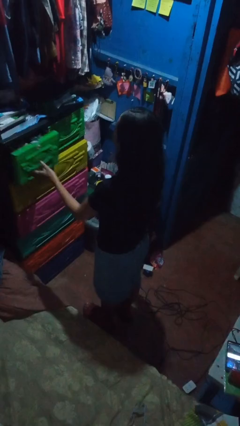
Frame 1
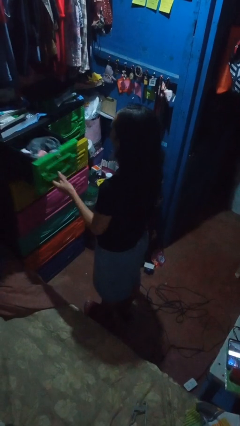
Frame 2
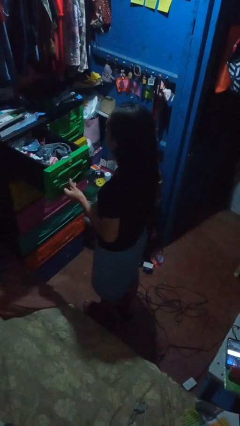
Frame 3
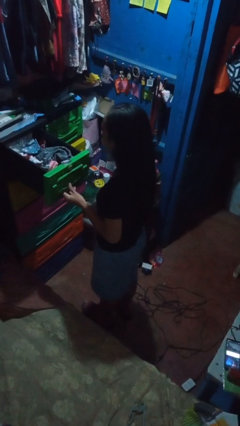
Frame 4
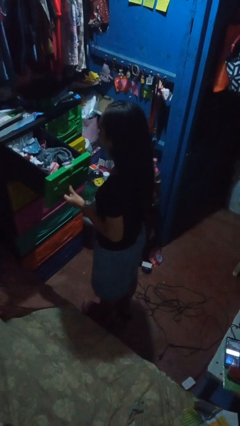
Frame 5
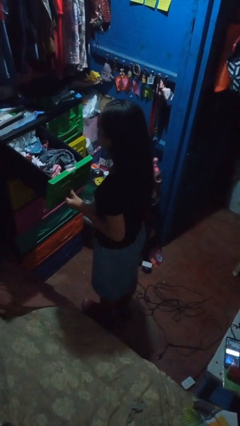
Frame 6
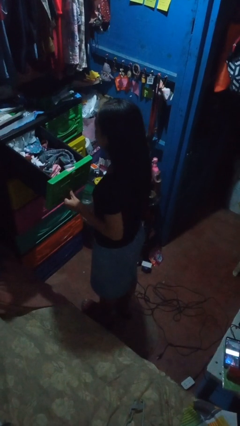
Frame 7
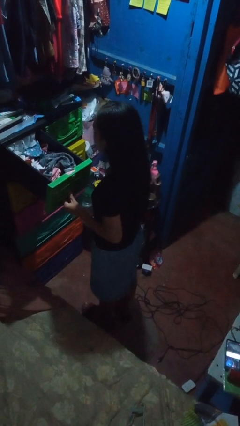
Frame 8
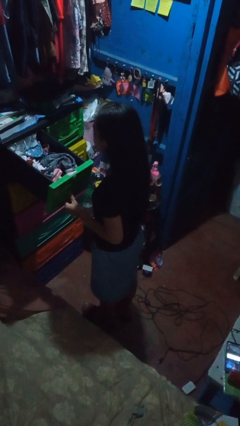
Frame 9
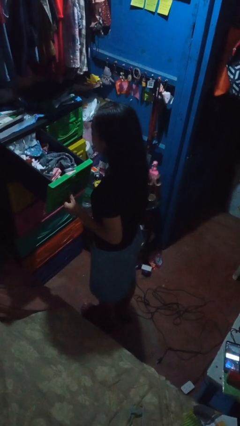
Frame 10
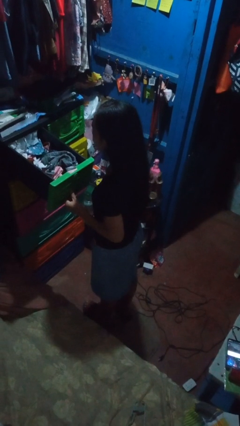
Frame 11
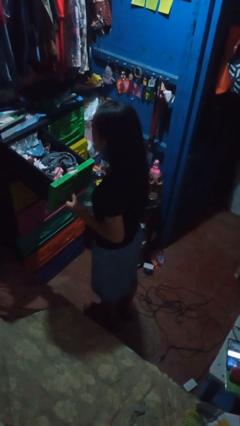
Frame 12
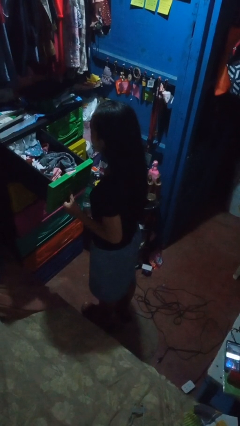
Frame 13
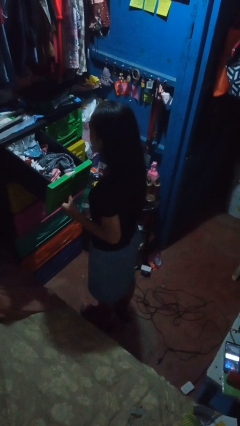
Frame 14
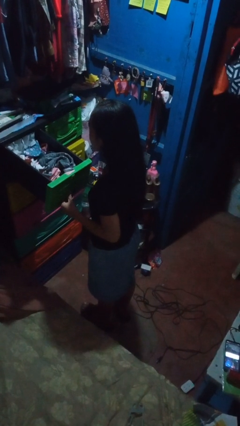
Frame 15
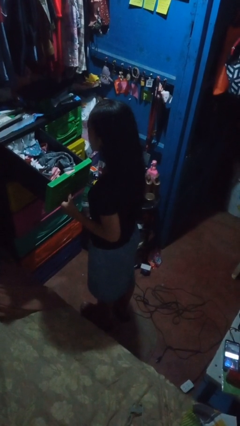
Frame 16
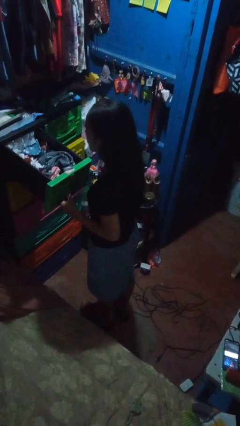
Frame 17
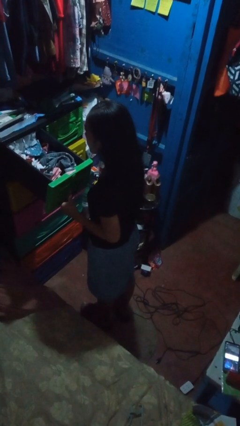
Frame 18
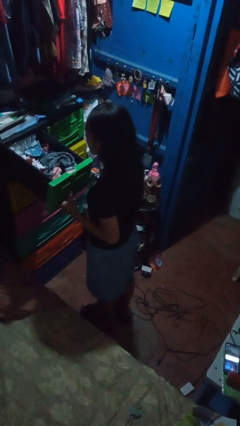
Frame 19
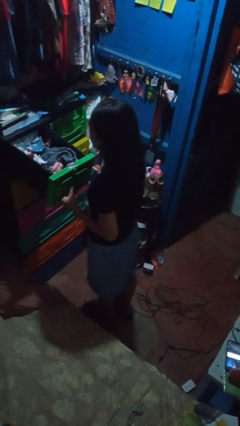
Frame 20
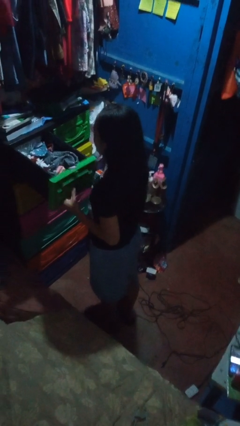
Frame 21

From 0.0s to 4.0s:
person opens dresser drawer

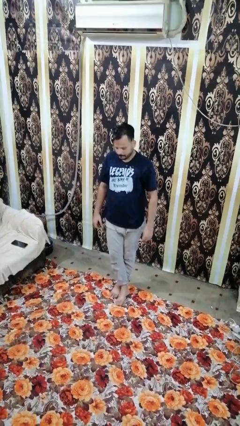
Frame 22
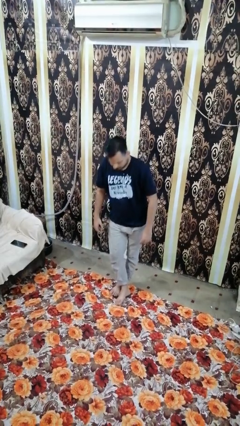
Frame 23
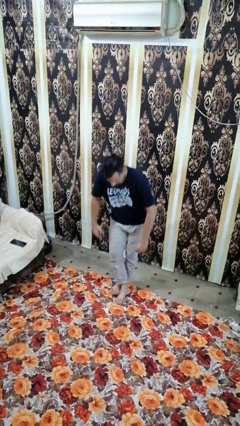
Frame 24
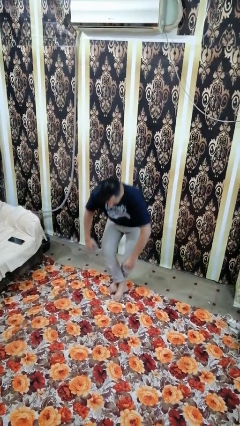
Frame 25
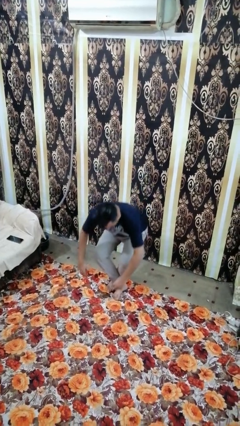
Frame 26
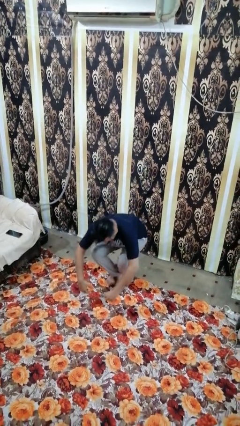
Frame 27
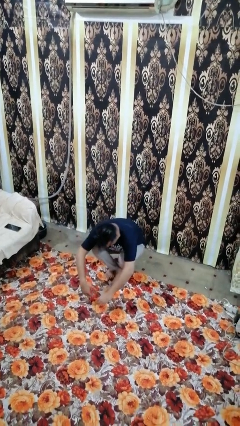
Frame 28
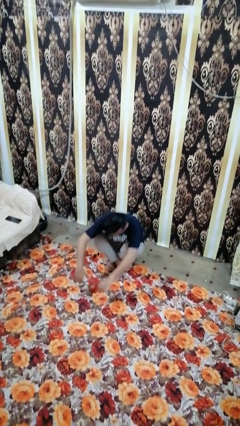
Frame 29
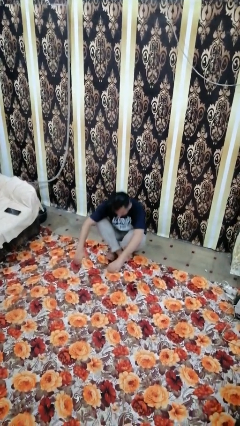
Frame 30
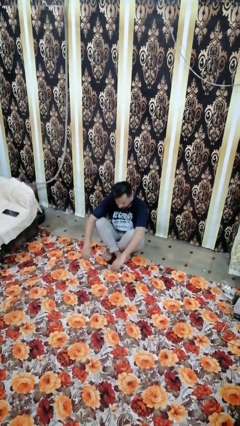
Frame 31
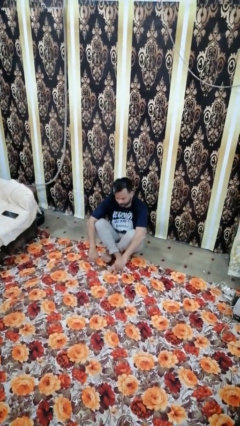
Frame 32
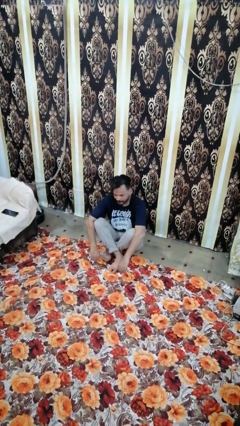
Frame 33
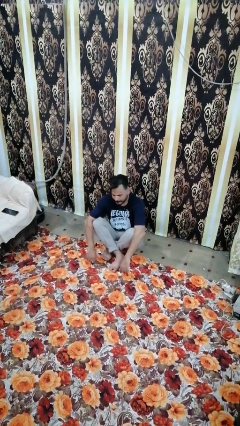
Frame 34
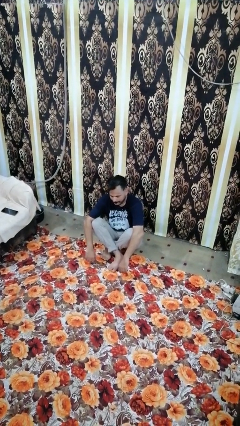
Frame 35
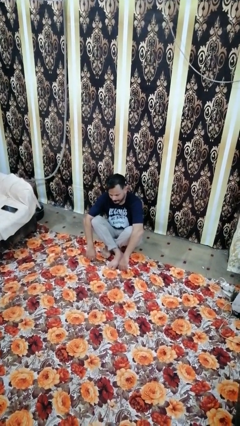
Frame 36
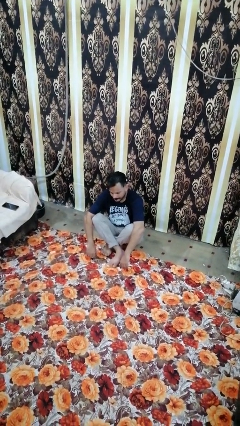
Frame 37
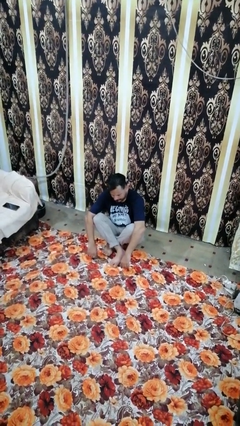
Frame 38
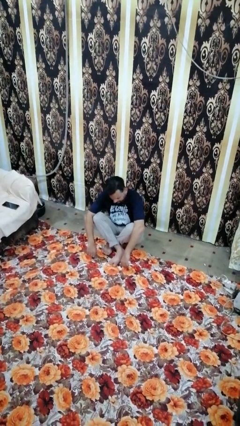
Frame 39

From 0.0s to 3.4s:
person sits crisscross

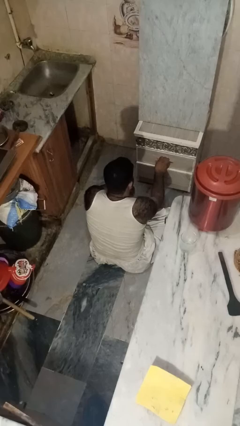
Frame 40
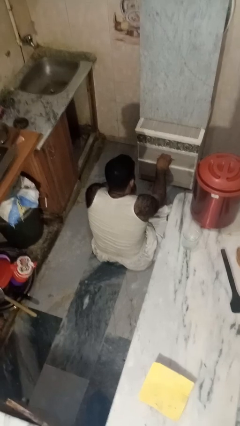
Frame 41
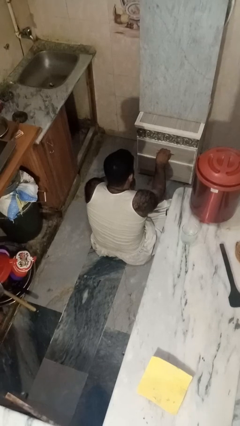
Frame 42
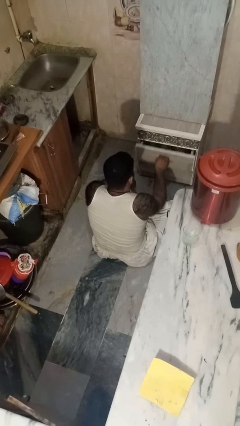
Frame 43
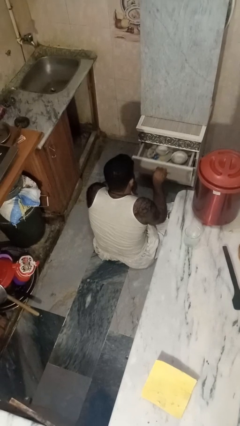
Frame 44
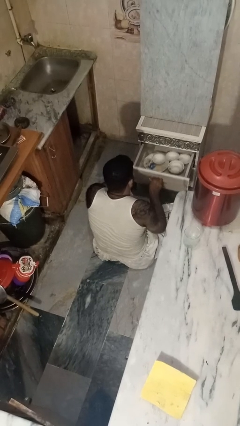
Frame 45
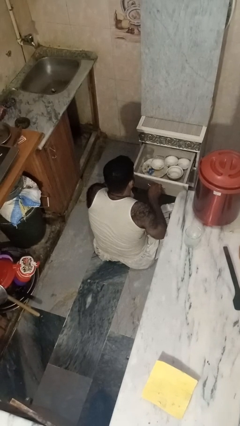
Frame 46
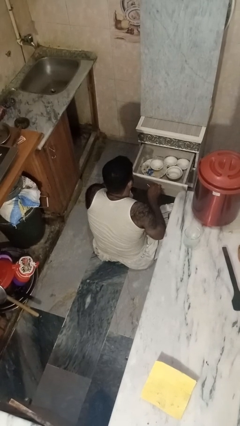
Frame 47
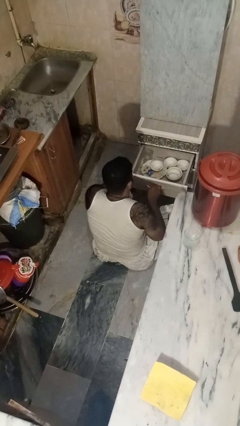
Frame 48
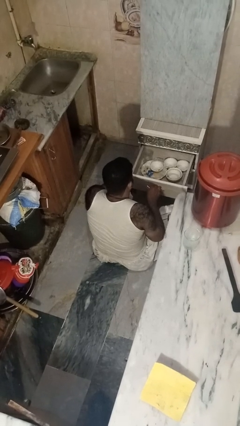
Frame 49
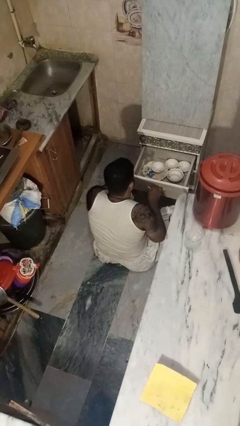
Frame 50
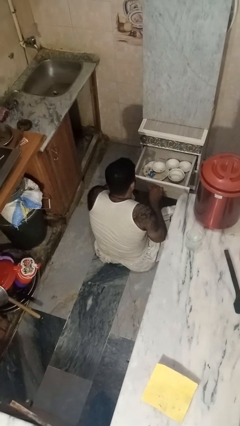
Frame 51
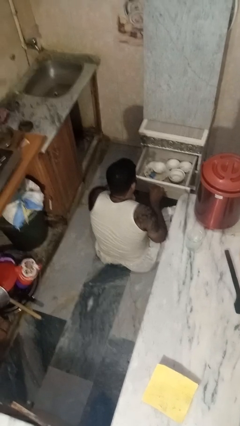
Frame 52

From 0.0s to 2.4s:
person opens kitchen drawer

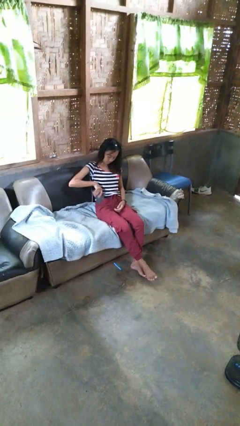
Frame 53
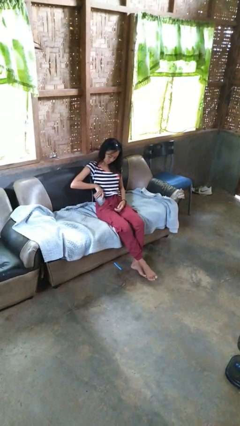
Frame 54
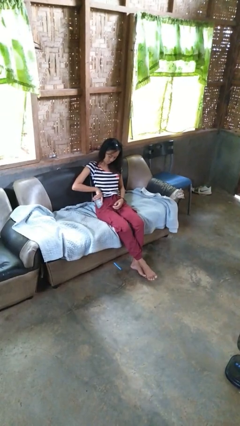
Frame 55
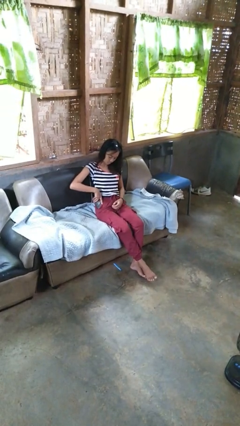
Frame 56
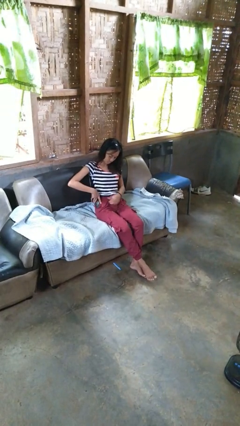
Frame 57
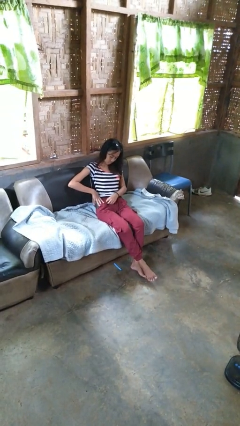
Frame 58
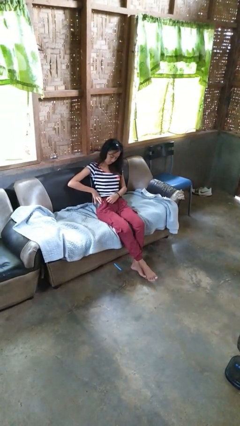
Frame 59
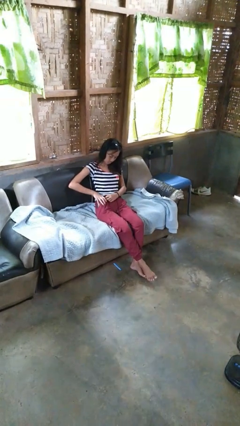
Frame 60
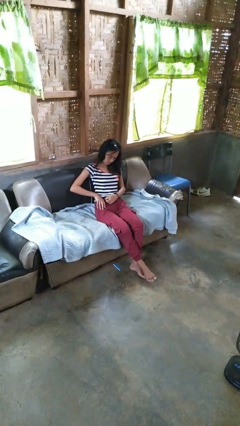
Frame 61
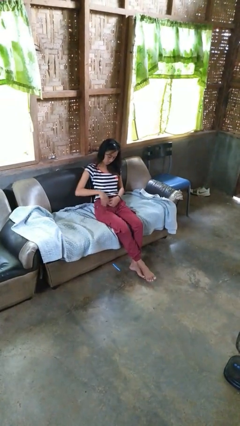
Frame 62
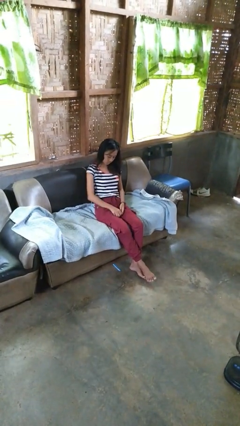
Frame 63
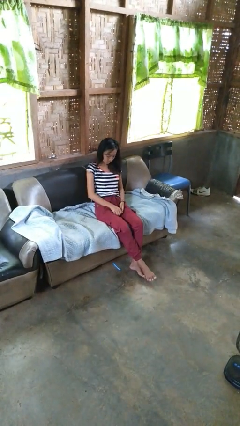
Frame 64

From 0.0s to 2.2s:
person puts phone into pocket

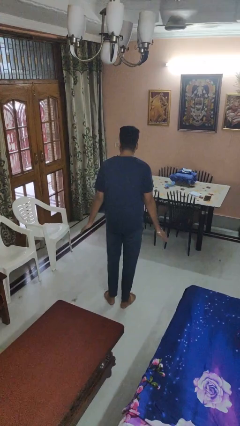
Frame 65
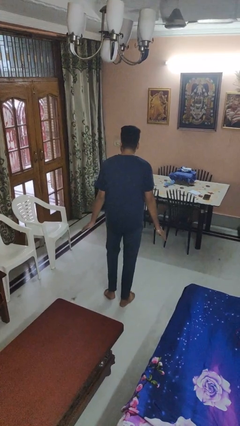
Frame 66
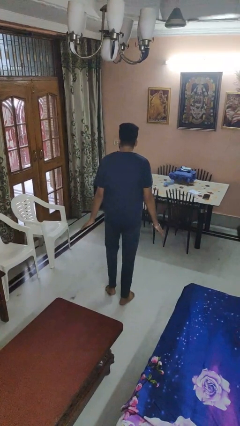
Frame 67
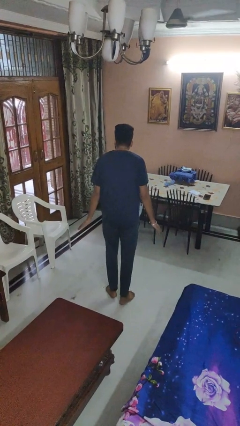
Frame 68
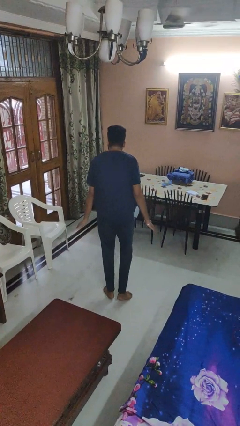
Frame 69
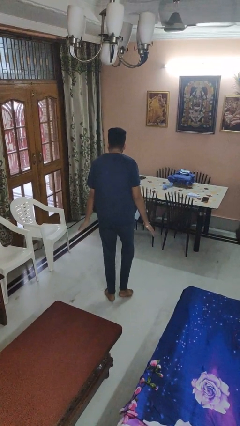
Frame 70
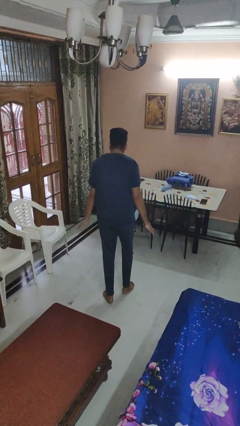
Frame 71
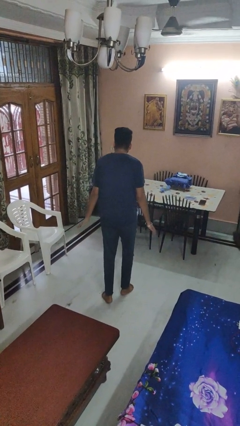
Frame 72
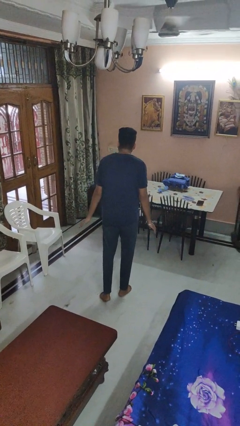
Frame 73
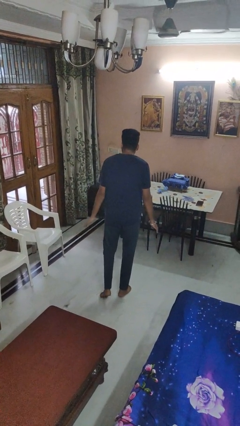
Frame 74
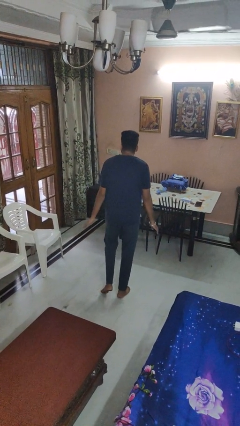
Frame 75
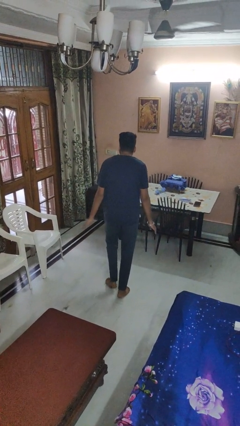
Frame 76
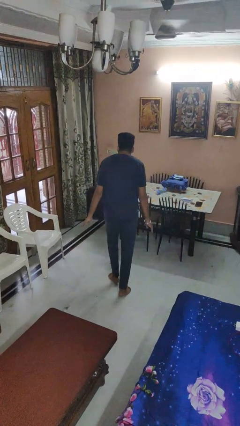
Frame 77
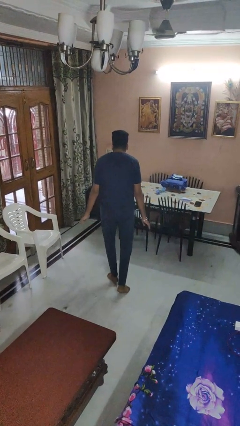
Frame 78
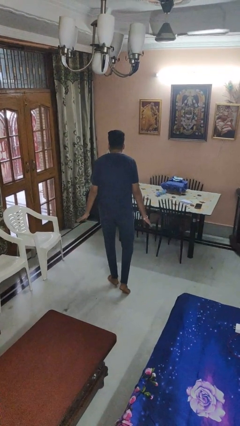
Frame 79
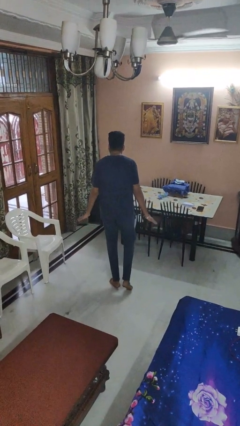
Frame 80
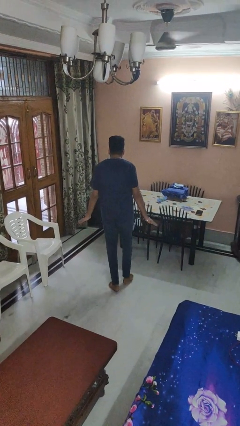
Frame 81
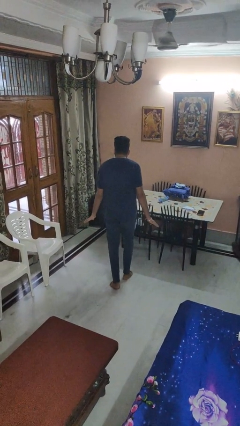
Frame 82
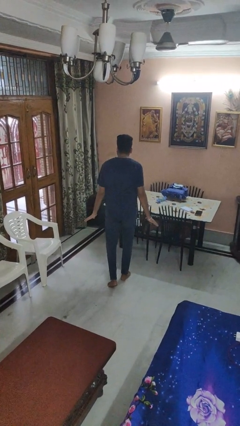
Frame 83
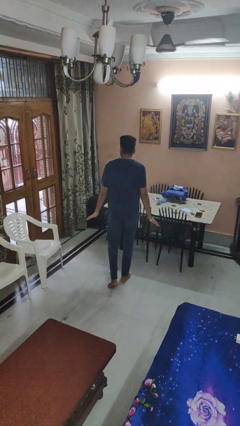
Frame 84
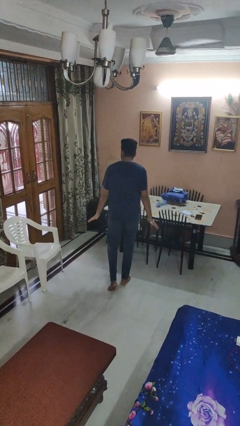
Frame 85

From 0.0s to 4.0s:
person walks tiptoe

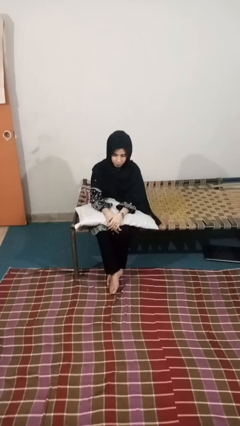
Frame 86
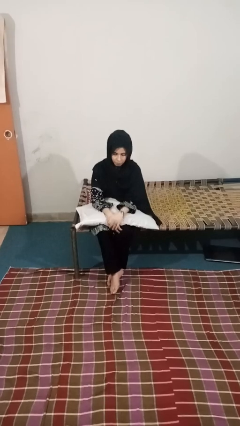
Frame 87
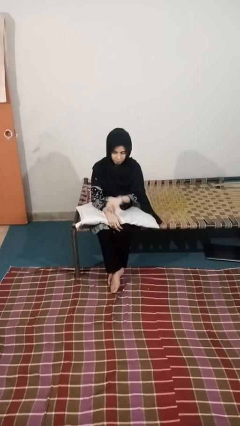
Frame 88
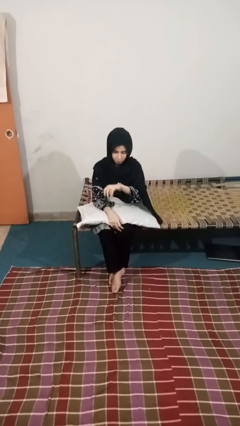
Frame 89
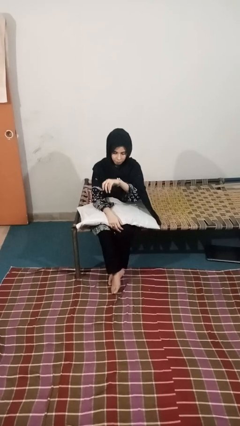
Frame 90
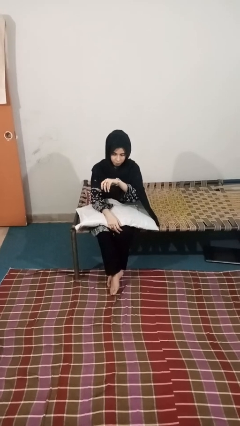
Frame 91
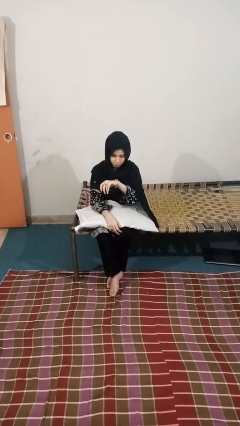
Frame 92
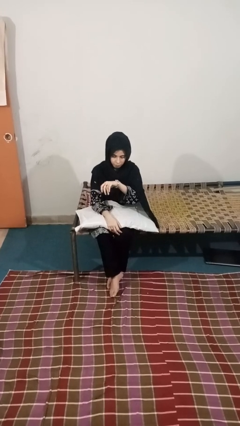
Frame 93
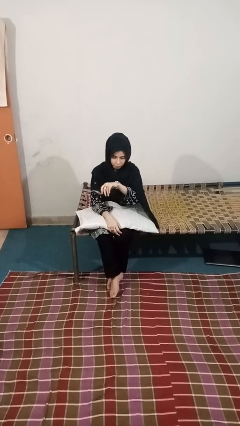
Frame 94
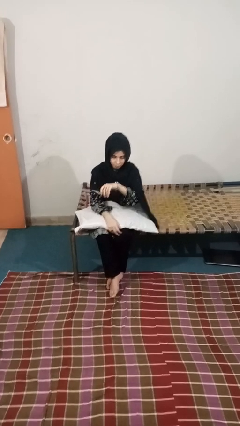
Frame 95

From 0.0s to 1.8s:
person looks at wristwatch
